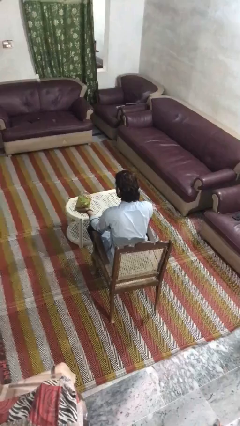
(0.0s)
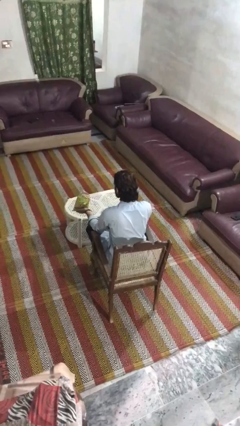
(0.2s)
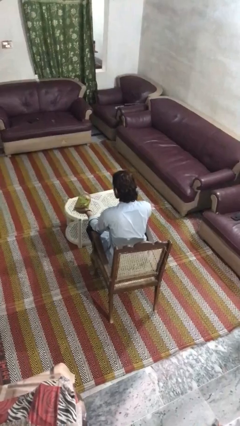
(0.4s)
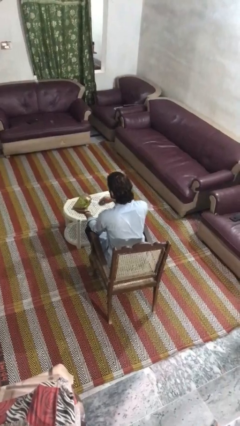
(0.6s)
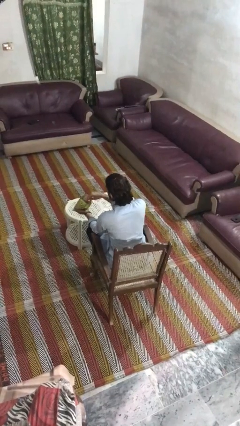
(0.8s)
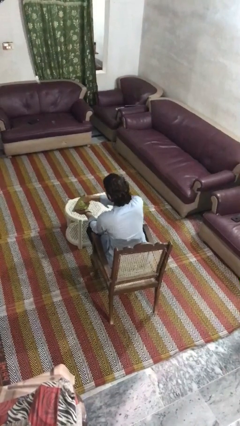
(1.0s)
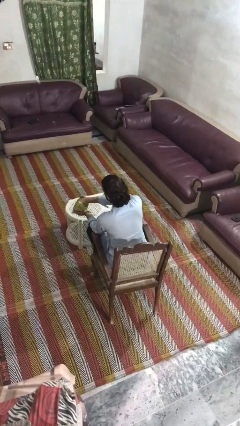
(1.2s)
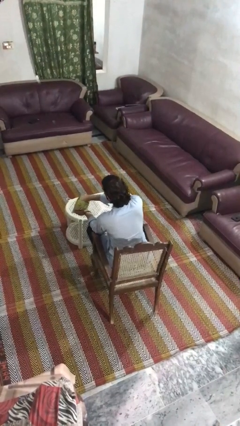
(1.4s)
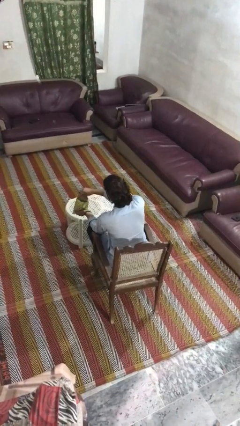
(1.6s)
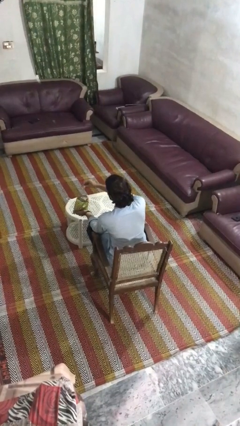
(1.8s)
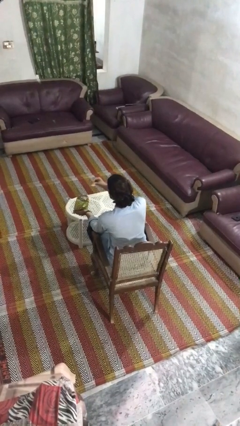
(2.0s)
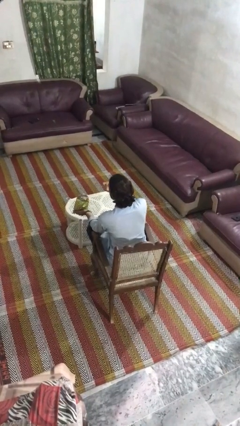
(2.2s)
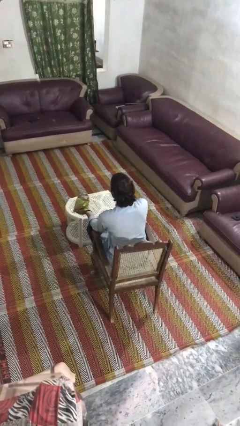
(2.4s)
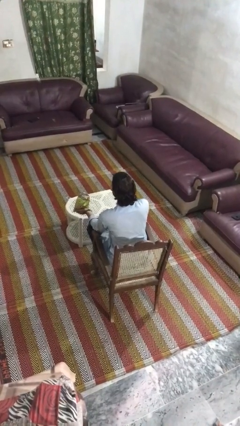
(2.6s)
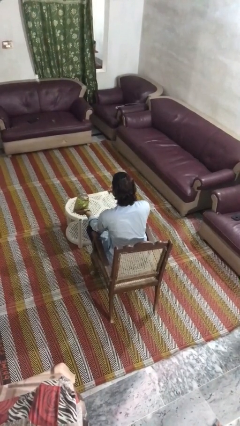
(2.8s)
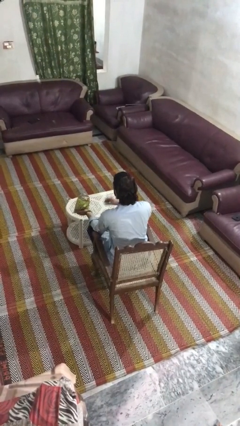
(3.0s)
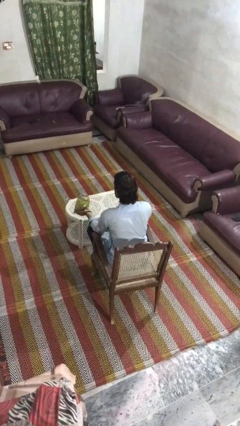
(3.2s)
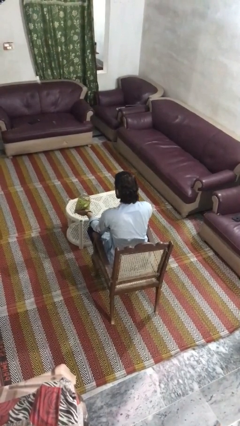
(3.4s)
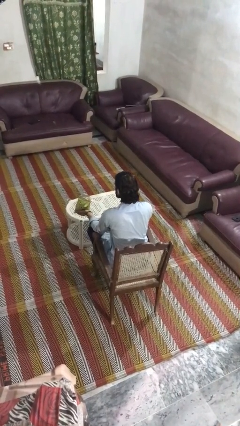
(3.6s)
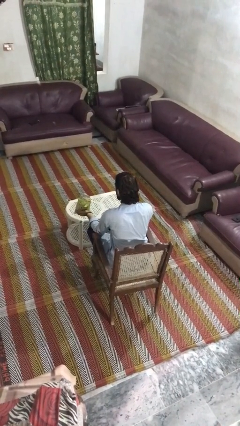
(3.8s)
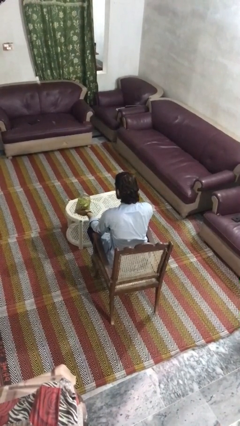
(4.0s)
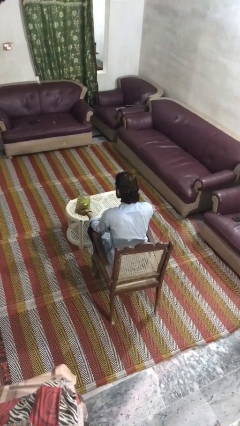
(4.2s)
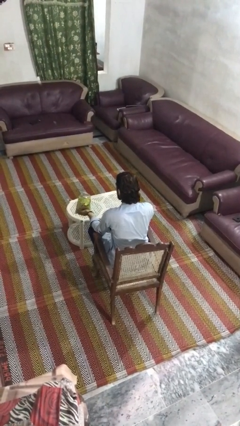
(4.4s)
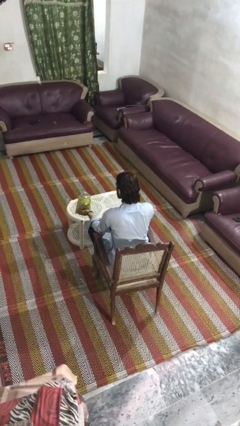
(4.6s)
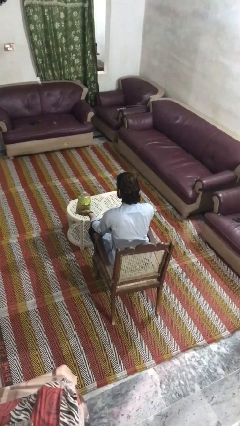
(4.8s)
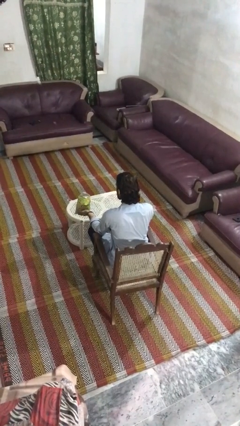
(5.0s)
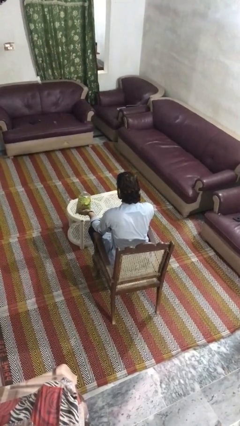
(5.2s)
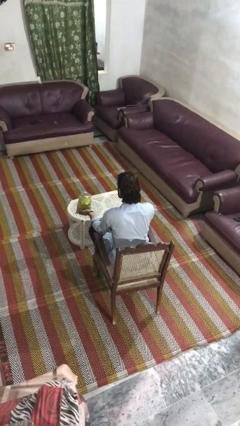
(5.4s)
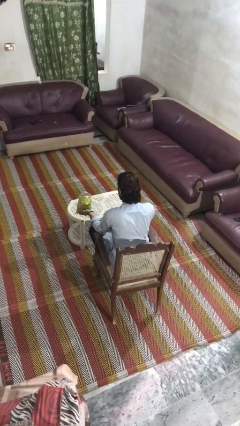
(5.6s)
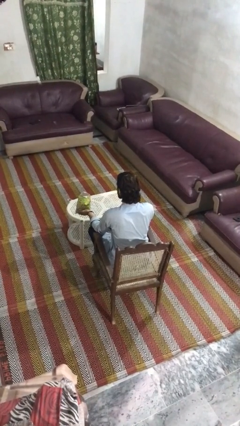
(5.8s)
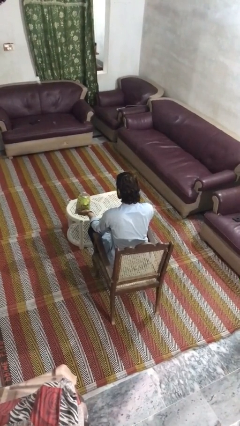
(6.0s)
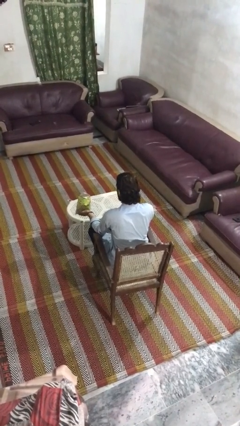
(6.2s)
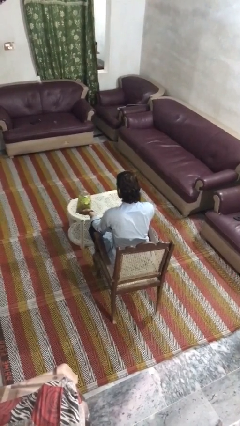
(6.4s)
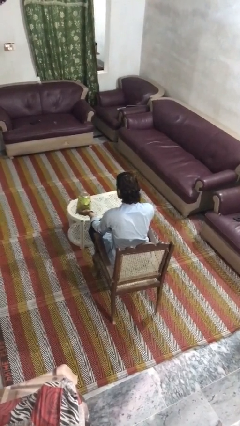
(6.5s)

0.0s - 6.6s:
person eats snack from bag

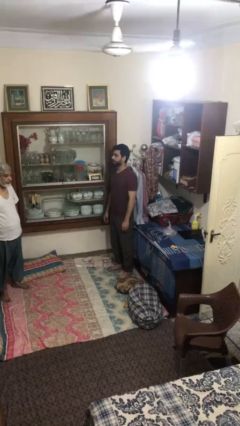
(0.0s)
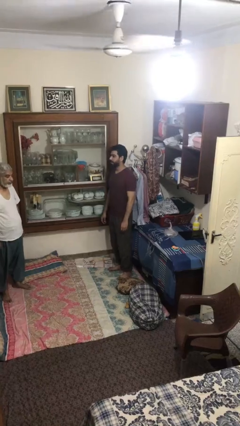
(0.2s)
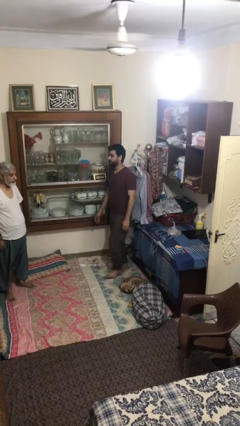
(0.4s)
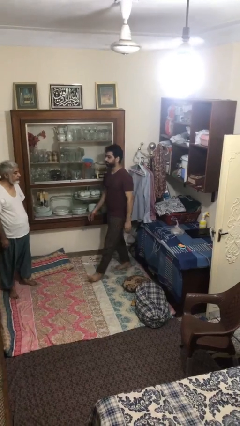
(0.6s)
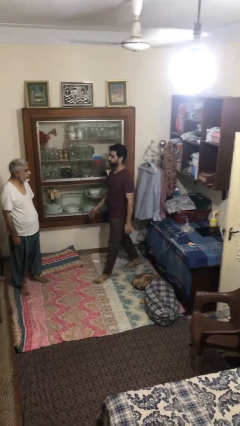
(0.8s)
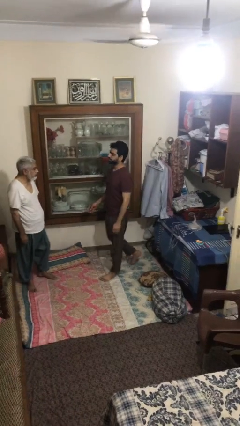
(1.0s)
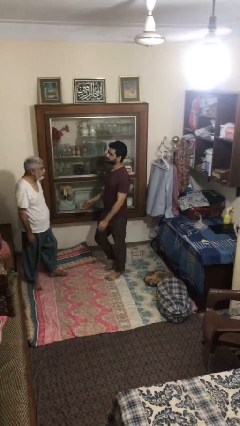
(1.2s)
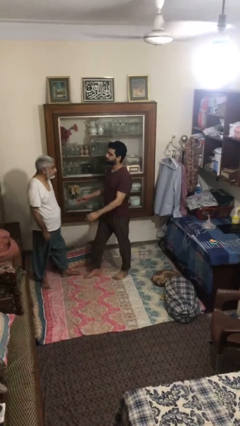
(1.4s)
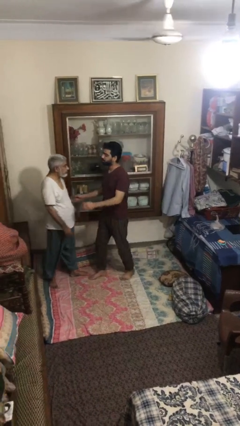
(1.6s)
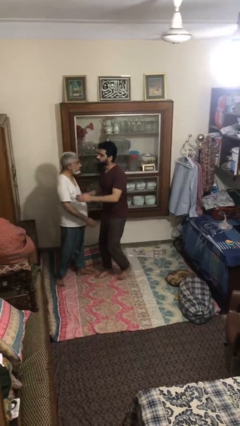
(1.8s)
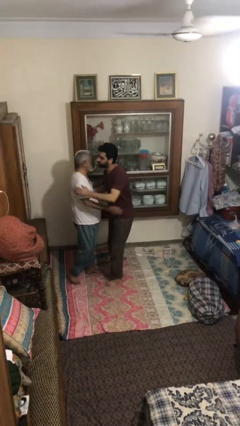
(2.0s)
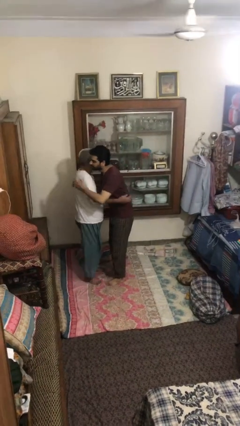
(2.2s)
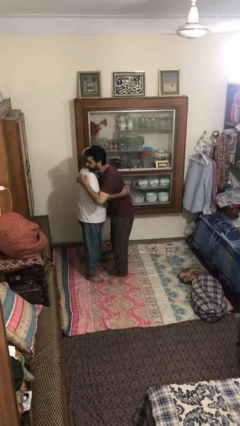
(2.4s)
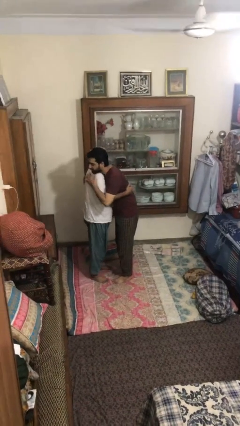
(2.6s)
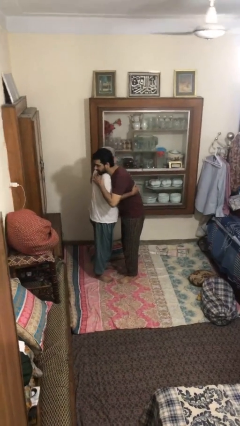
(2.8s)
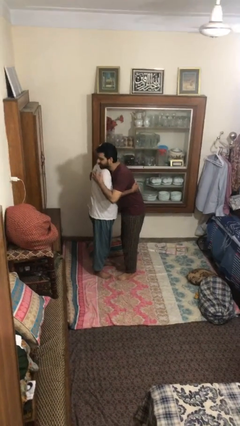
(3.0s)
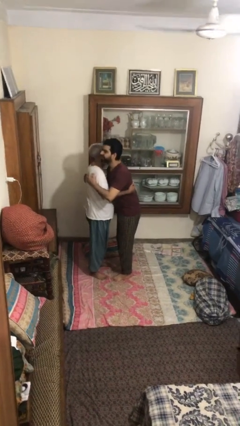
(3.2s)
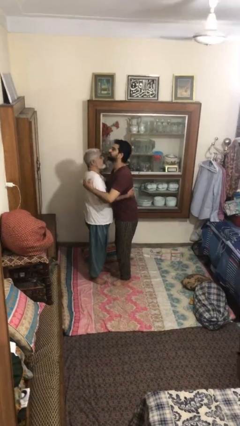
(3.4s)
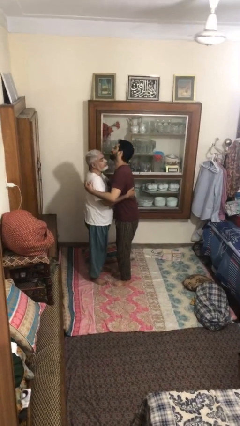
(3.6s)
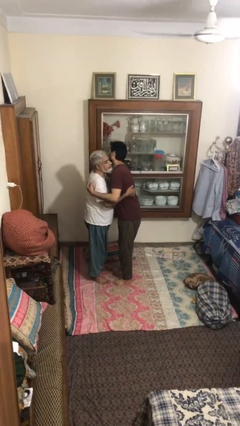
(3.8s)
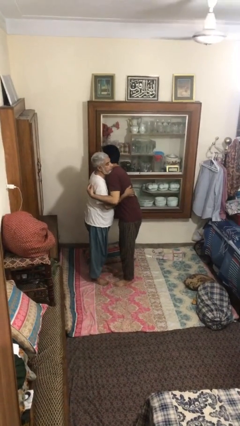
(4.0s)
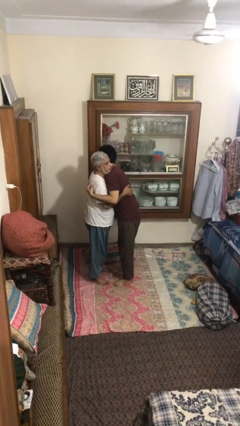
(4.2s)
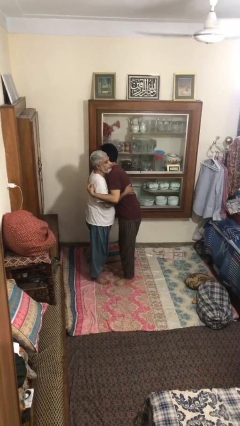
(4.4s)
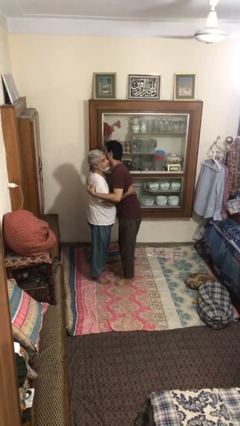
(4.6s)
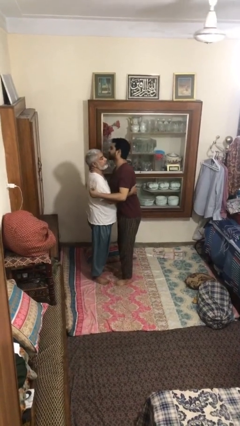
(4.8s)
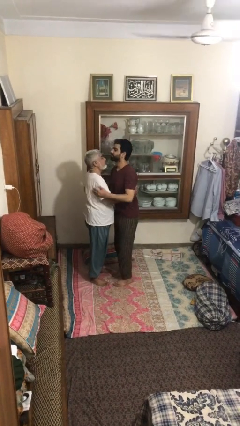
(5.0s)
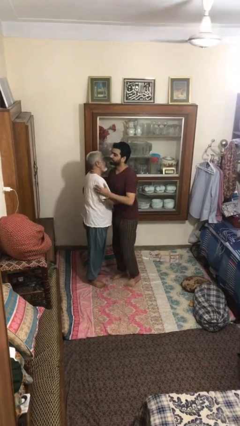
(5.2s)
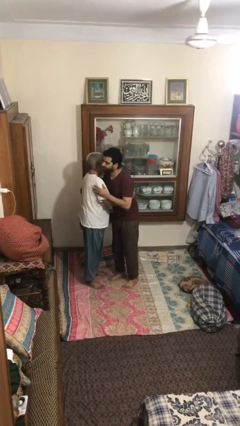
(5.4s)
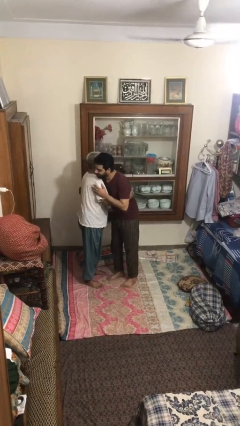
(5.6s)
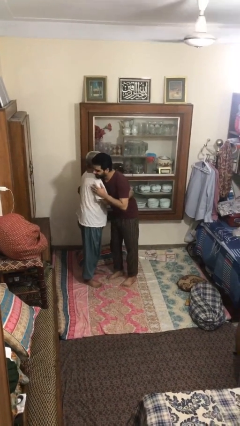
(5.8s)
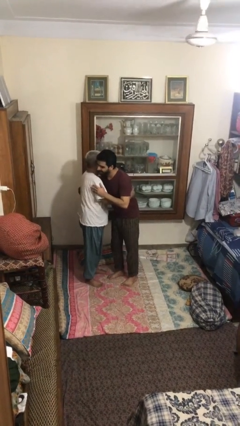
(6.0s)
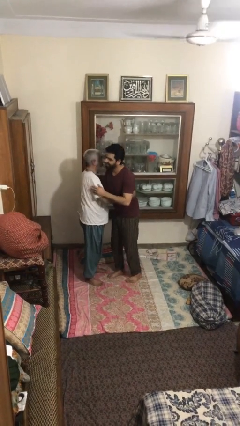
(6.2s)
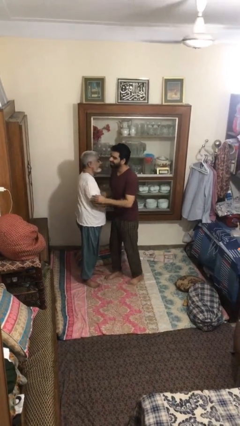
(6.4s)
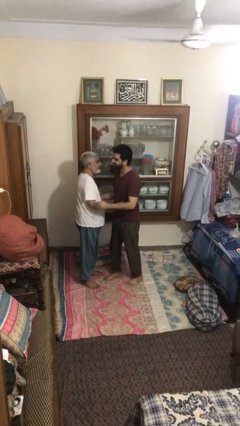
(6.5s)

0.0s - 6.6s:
person embraces person

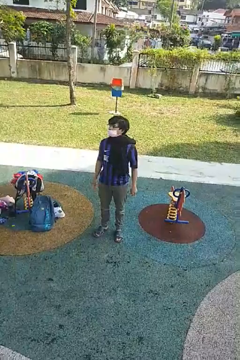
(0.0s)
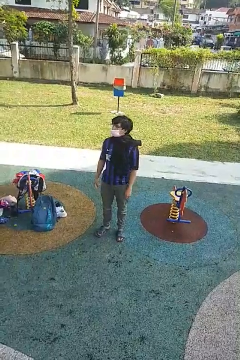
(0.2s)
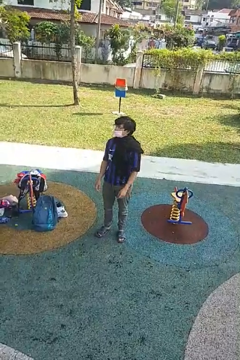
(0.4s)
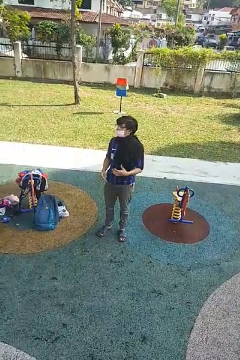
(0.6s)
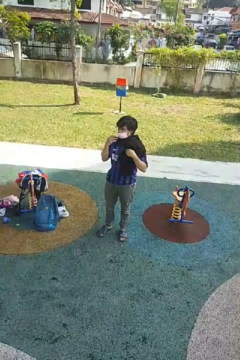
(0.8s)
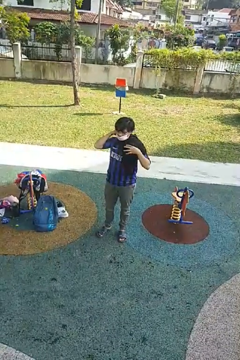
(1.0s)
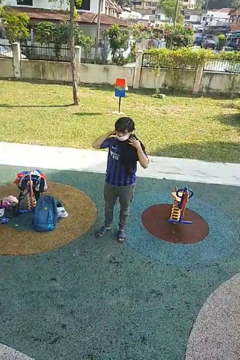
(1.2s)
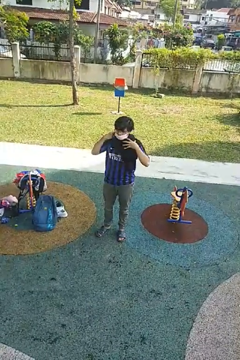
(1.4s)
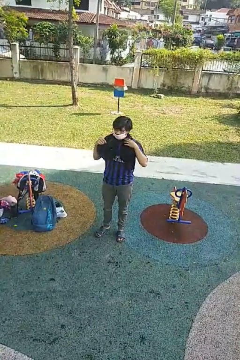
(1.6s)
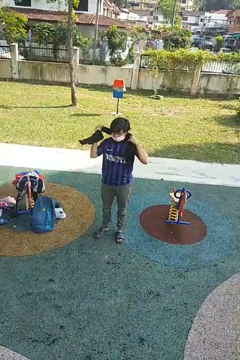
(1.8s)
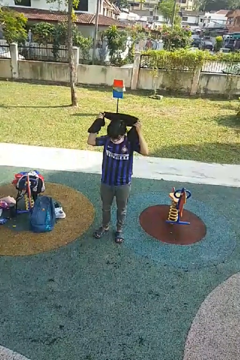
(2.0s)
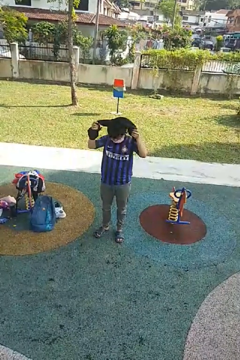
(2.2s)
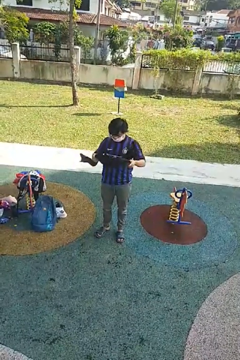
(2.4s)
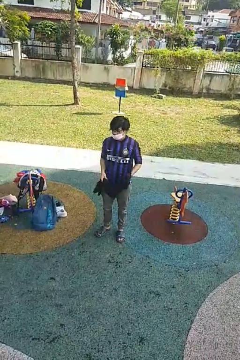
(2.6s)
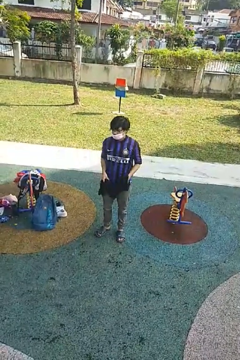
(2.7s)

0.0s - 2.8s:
person takes off scarf

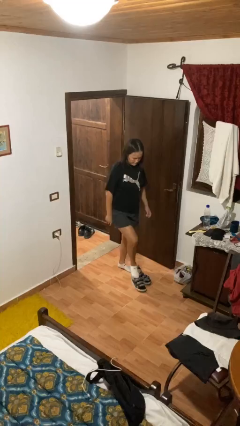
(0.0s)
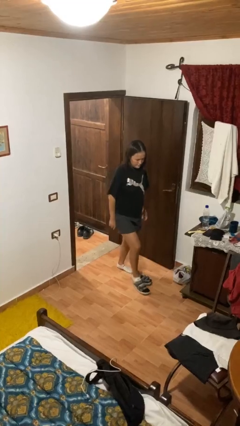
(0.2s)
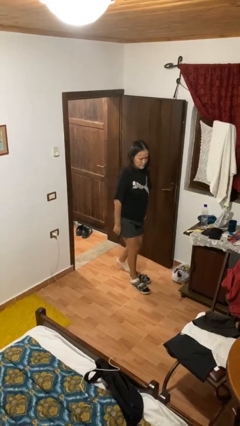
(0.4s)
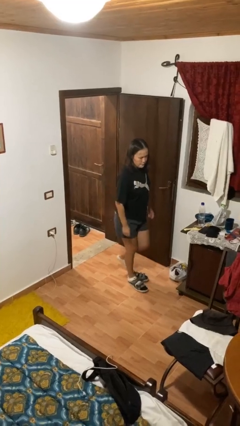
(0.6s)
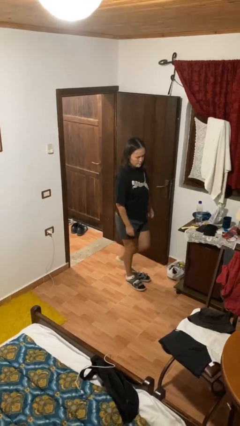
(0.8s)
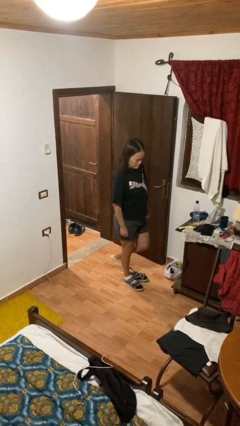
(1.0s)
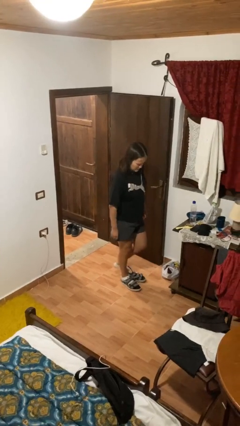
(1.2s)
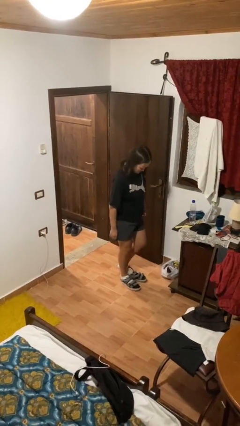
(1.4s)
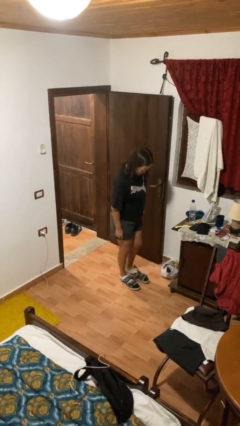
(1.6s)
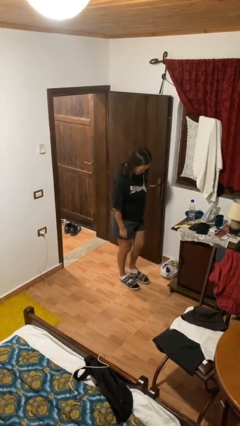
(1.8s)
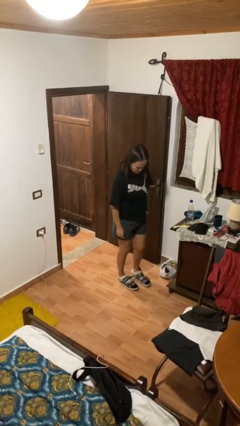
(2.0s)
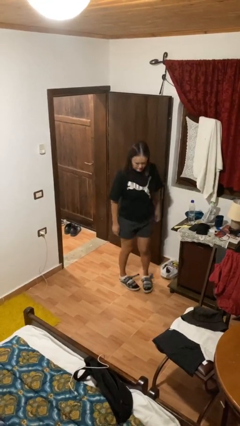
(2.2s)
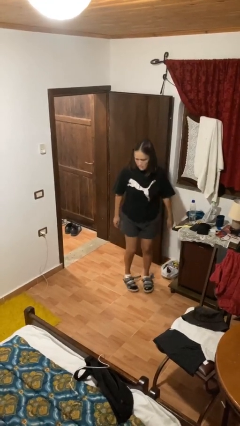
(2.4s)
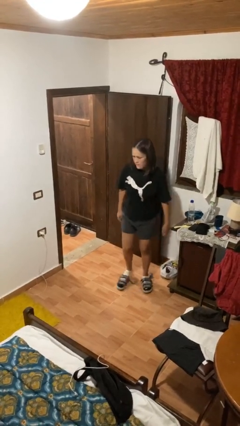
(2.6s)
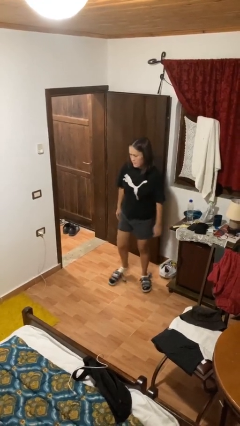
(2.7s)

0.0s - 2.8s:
person puts on shoes
